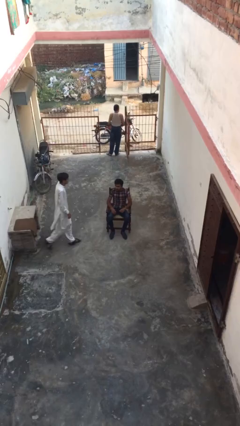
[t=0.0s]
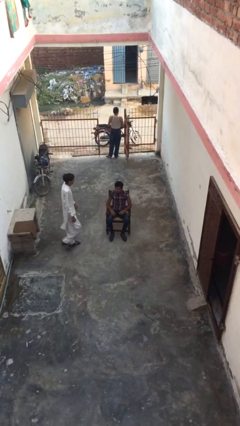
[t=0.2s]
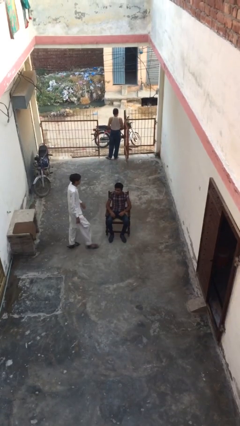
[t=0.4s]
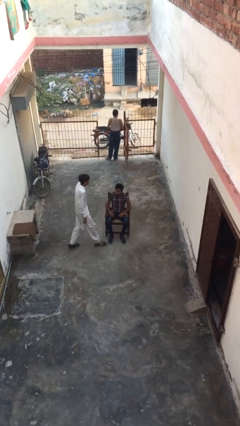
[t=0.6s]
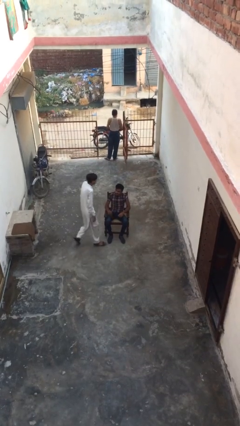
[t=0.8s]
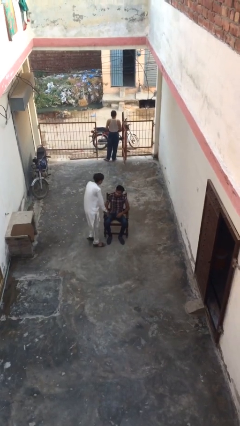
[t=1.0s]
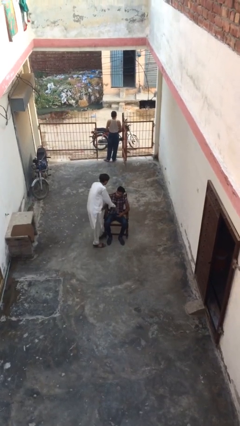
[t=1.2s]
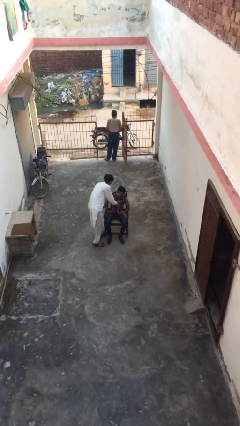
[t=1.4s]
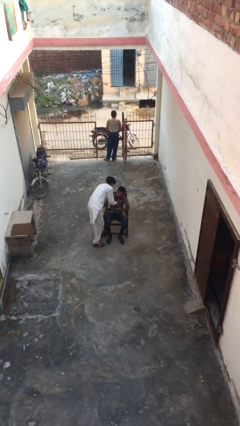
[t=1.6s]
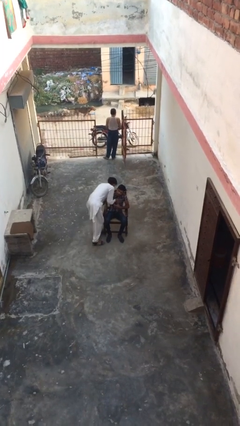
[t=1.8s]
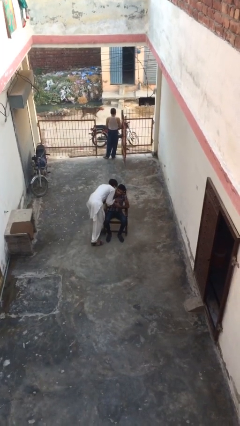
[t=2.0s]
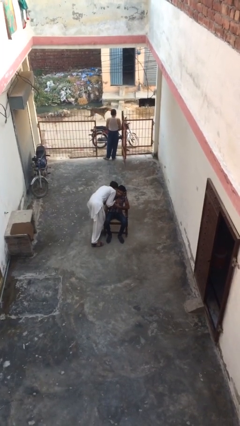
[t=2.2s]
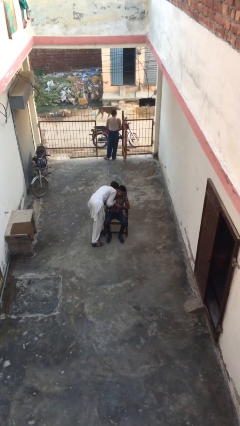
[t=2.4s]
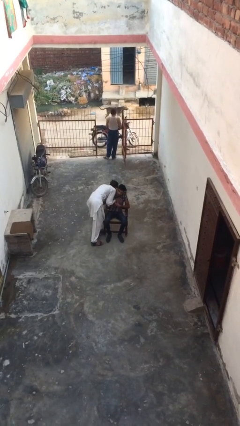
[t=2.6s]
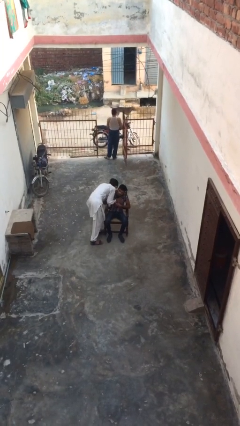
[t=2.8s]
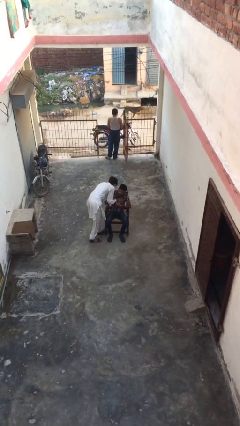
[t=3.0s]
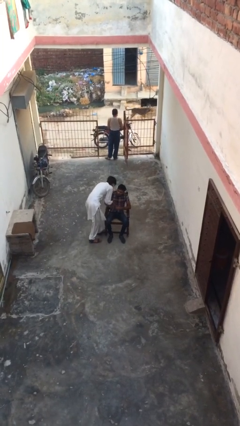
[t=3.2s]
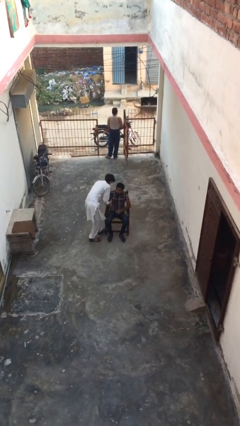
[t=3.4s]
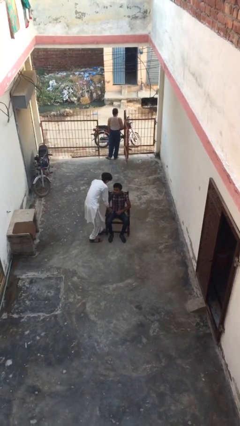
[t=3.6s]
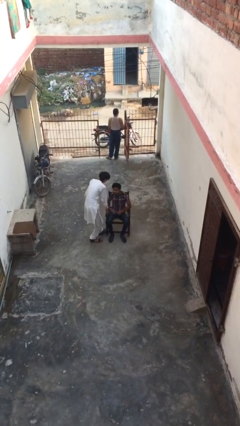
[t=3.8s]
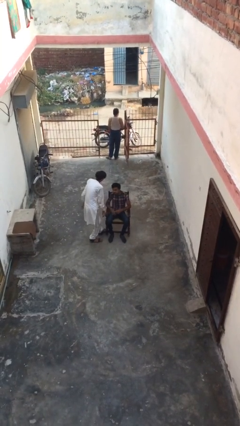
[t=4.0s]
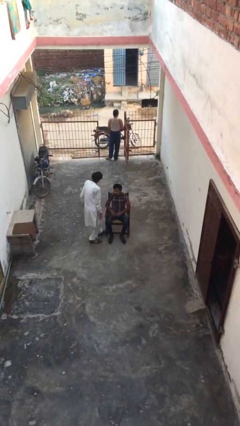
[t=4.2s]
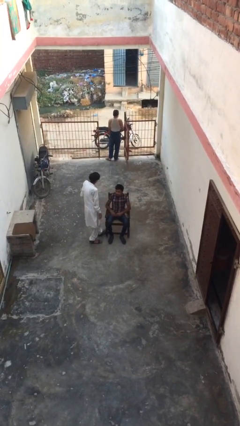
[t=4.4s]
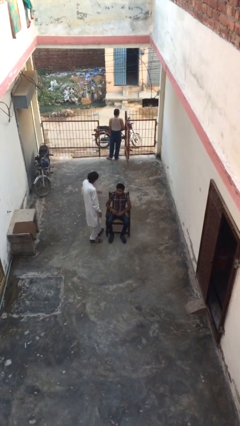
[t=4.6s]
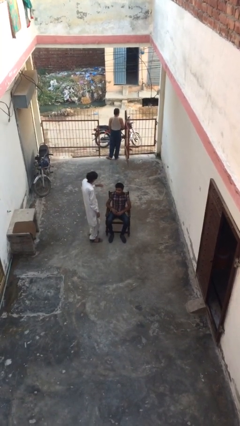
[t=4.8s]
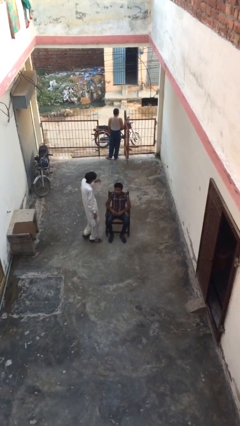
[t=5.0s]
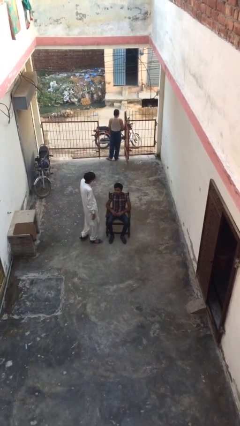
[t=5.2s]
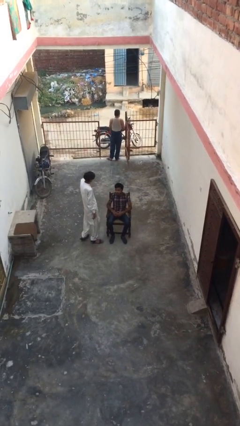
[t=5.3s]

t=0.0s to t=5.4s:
person embraces person

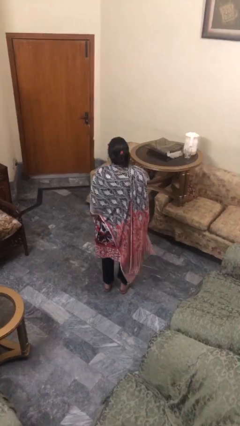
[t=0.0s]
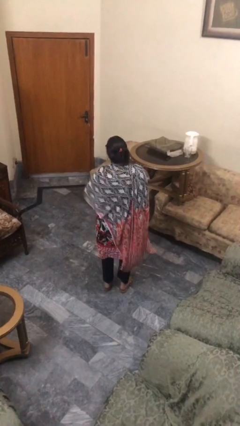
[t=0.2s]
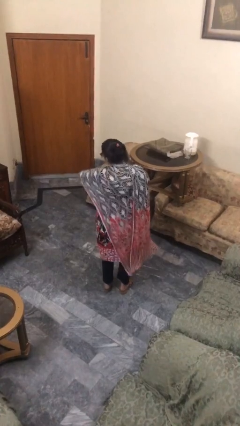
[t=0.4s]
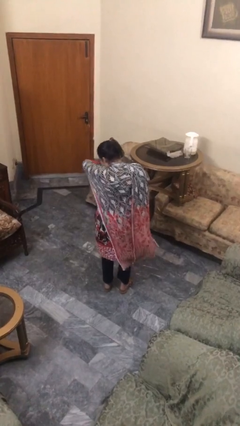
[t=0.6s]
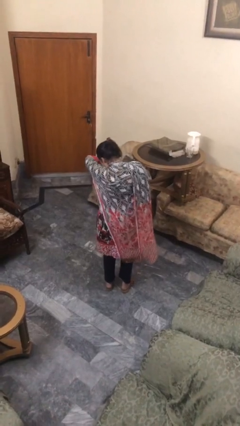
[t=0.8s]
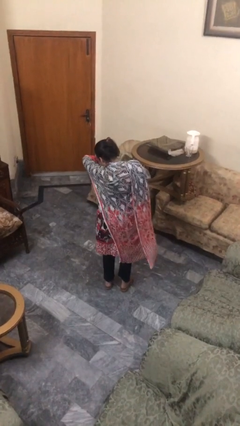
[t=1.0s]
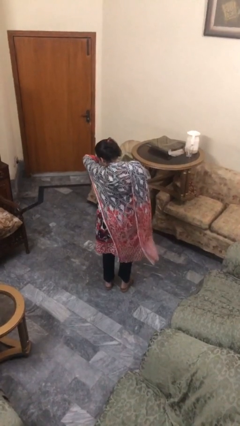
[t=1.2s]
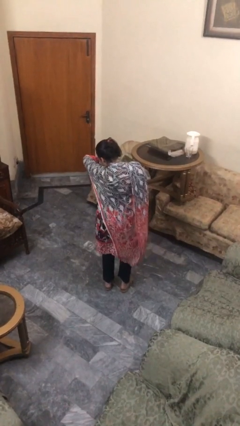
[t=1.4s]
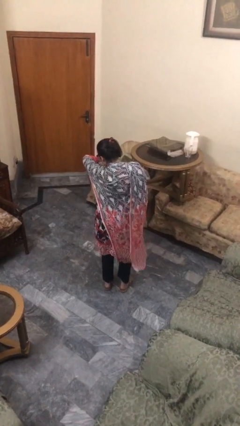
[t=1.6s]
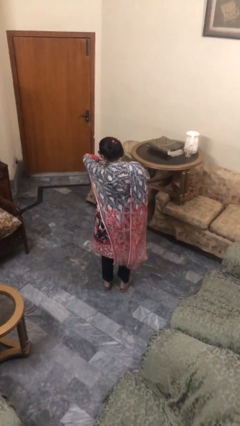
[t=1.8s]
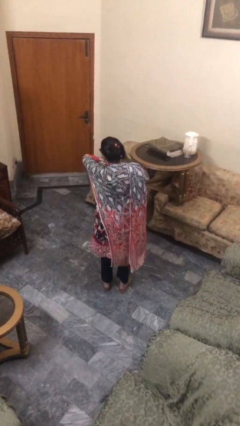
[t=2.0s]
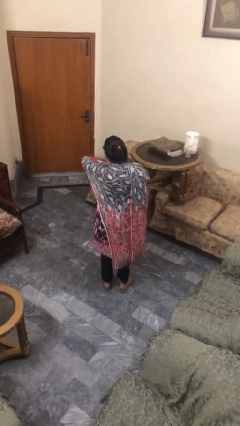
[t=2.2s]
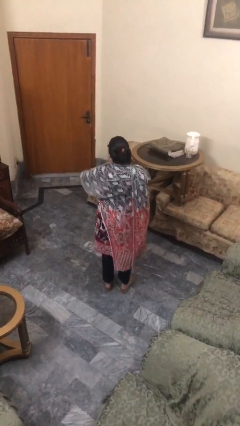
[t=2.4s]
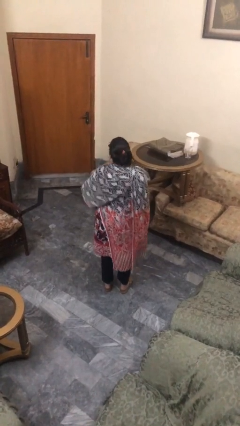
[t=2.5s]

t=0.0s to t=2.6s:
person sneezes into arm

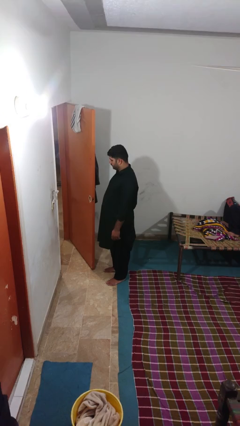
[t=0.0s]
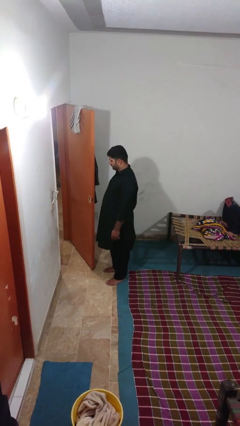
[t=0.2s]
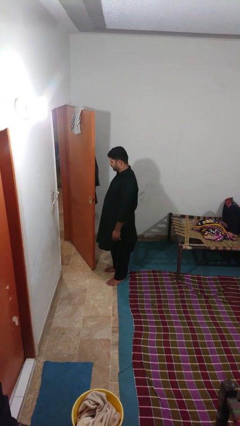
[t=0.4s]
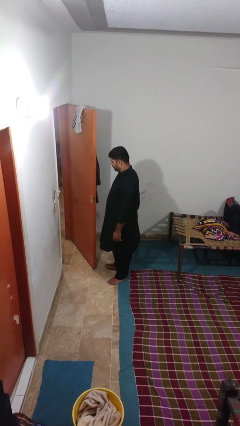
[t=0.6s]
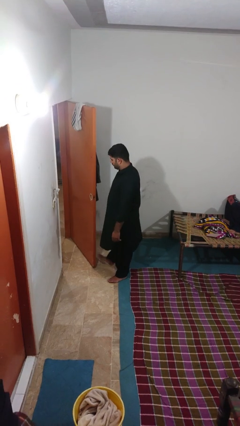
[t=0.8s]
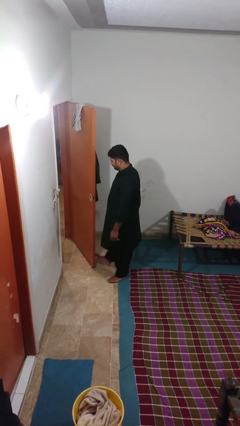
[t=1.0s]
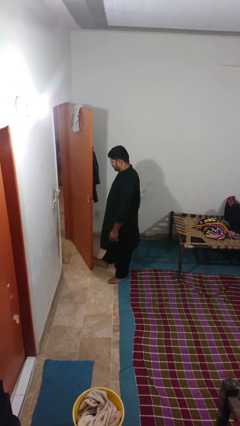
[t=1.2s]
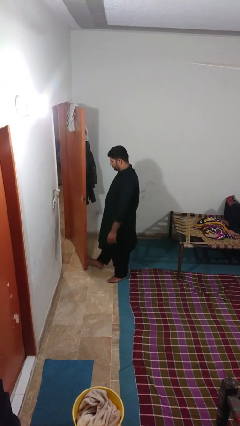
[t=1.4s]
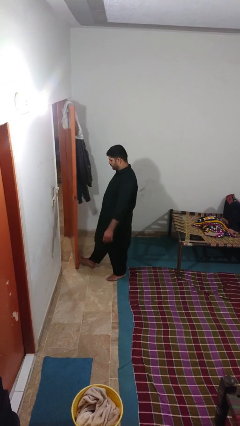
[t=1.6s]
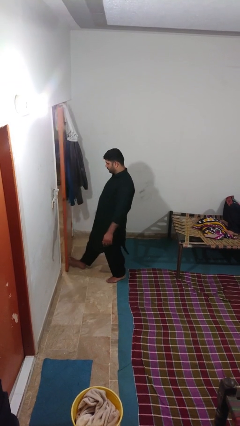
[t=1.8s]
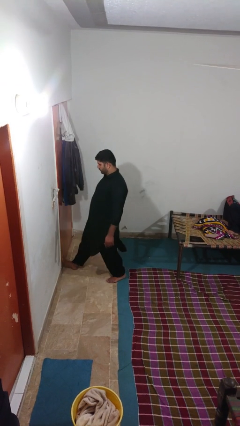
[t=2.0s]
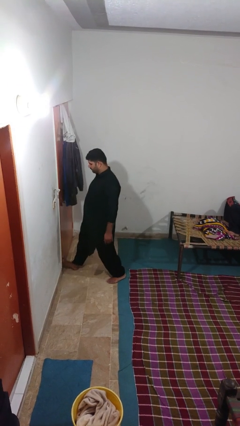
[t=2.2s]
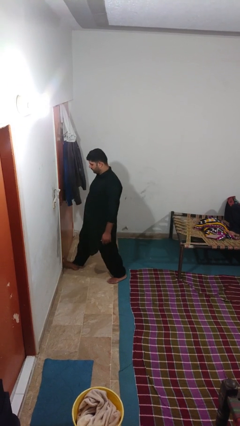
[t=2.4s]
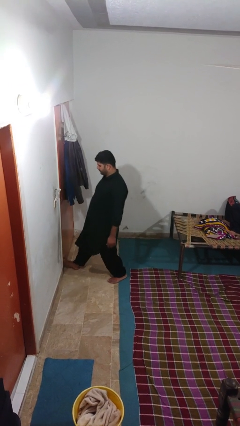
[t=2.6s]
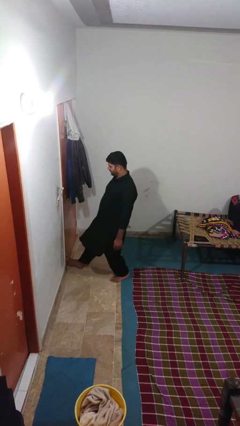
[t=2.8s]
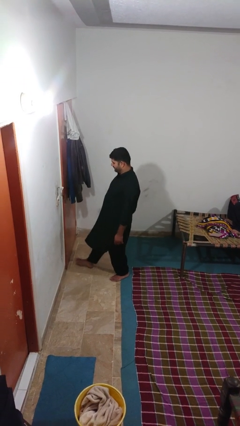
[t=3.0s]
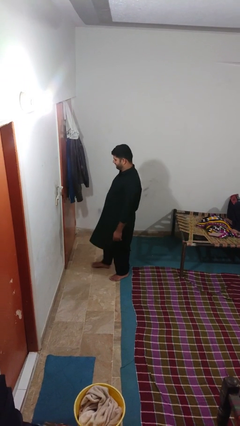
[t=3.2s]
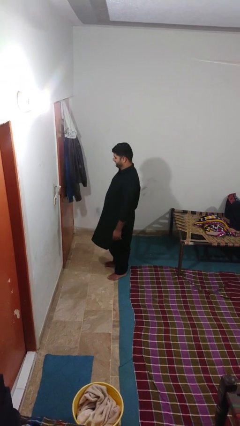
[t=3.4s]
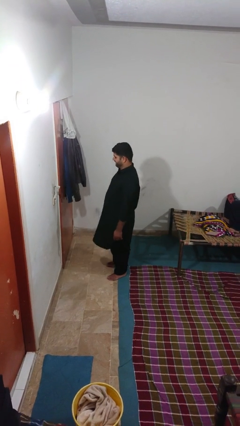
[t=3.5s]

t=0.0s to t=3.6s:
person closes door with foot

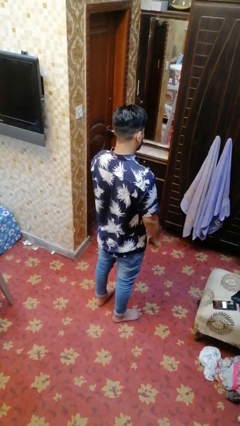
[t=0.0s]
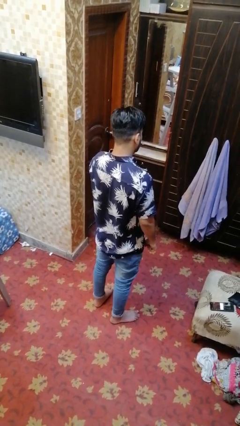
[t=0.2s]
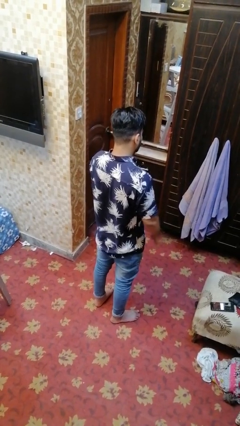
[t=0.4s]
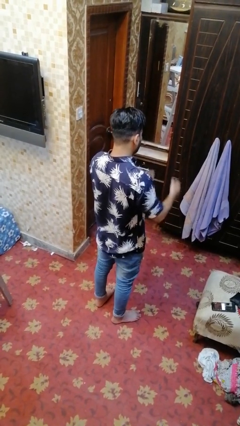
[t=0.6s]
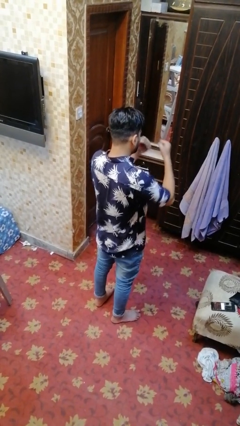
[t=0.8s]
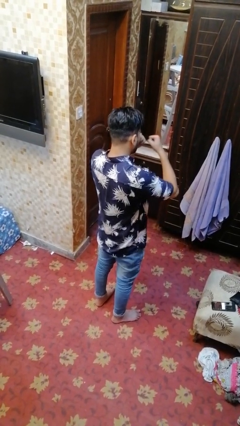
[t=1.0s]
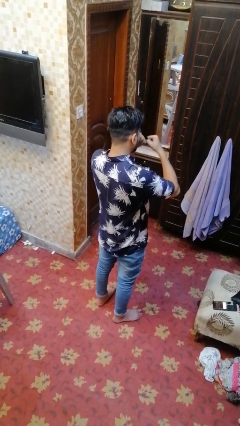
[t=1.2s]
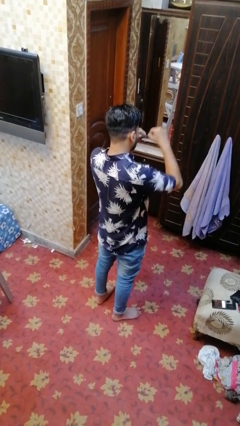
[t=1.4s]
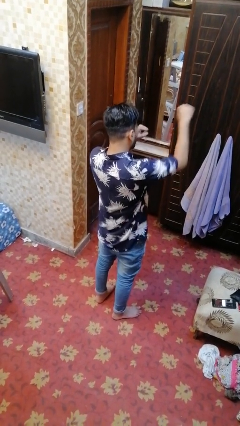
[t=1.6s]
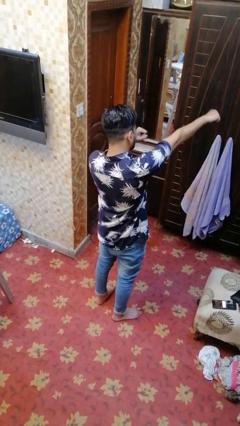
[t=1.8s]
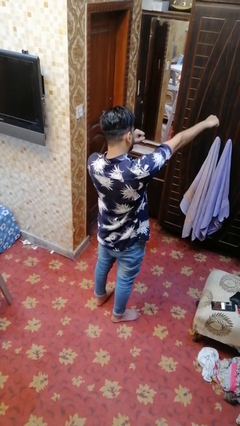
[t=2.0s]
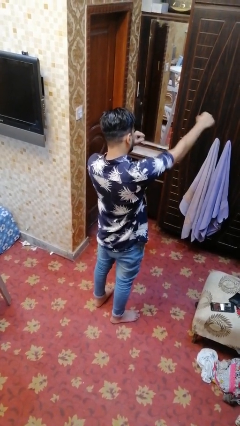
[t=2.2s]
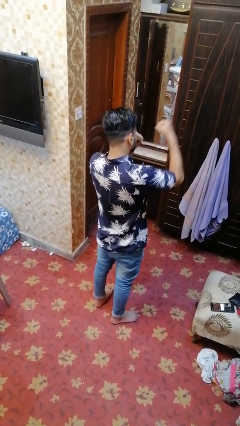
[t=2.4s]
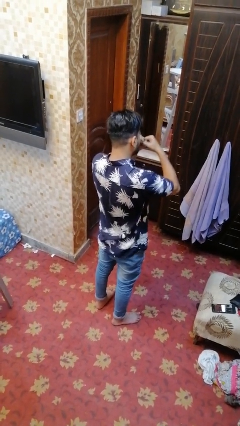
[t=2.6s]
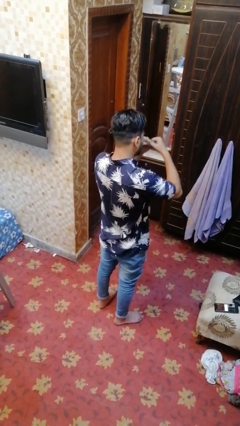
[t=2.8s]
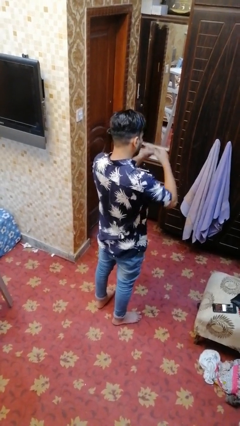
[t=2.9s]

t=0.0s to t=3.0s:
person punches

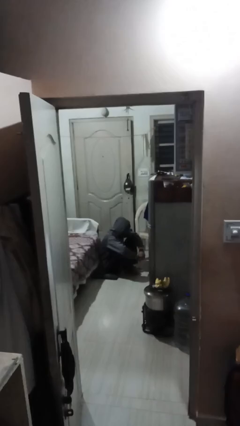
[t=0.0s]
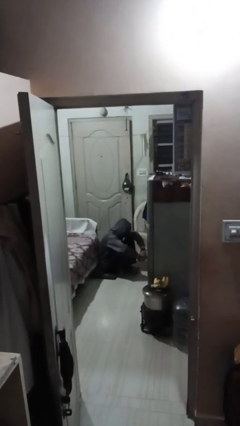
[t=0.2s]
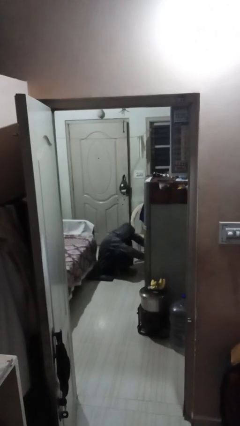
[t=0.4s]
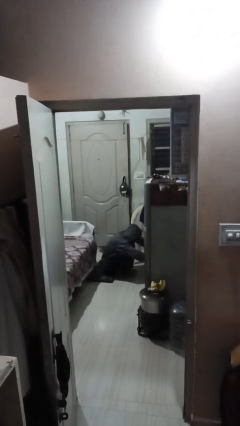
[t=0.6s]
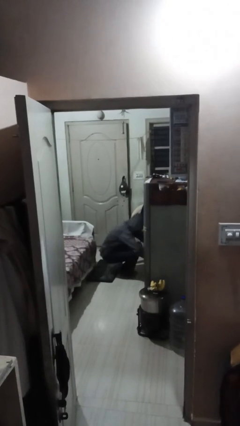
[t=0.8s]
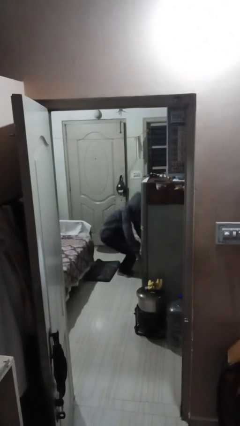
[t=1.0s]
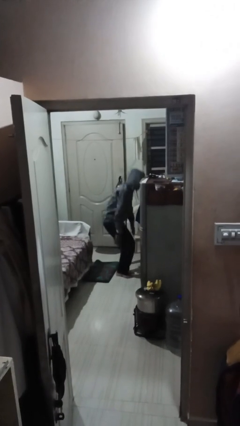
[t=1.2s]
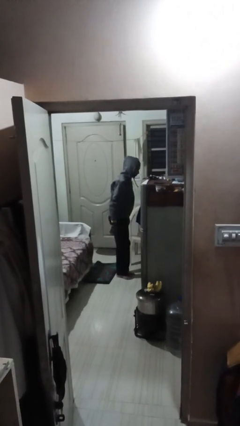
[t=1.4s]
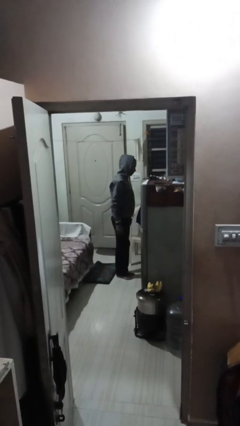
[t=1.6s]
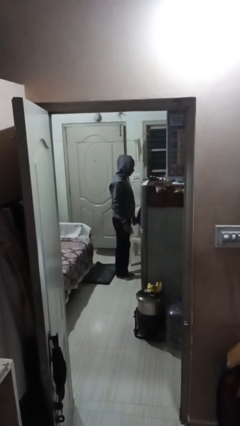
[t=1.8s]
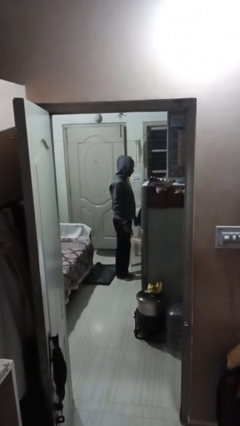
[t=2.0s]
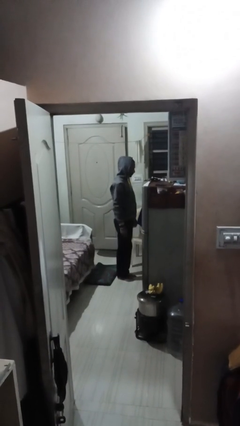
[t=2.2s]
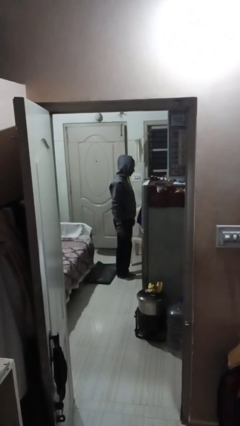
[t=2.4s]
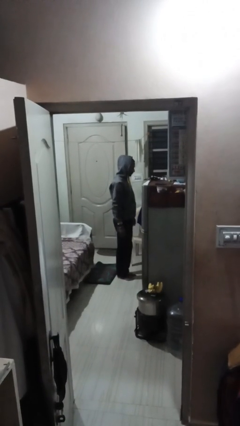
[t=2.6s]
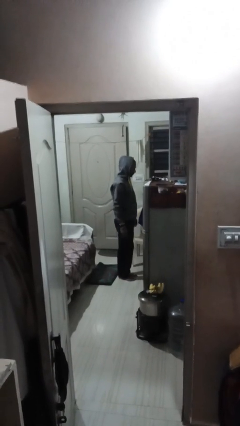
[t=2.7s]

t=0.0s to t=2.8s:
person stands up
